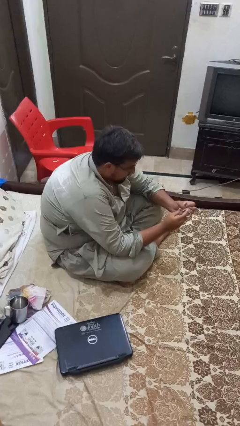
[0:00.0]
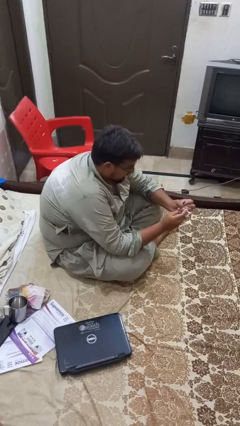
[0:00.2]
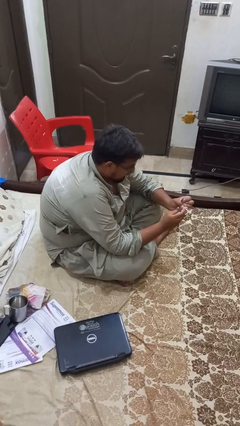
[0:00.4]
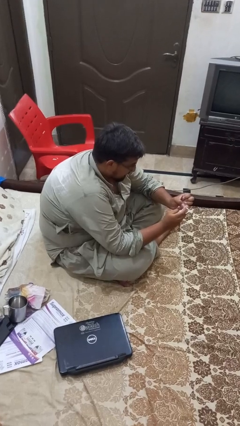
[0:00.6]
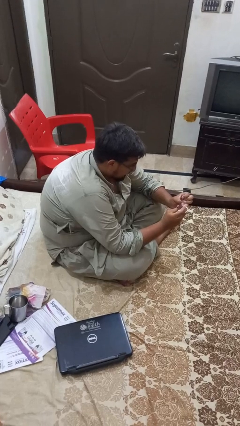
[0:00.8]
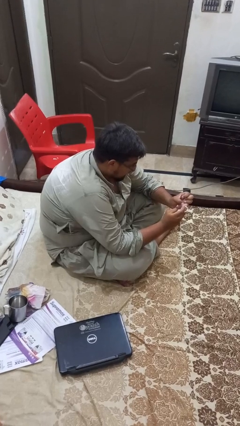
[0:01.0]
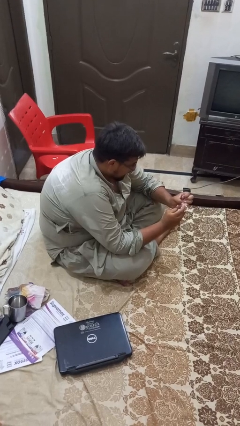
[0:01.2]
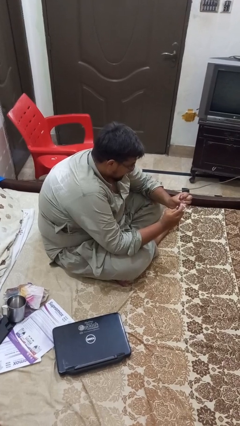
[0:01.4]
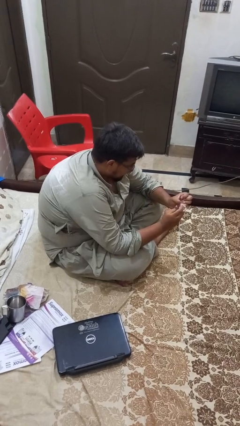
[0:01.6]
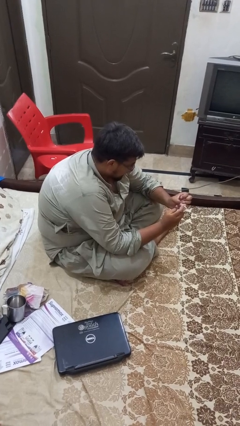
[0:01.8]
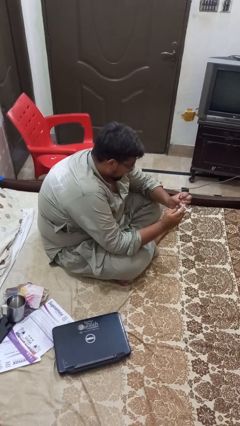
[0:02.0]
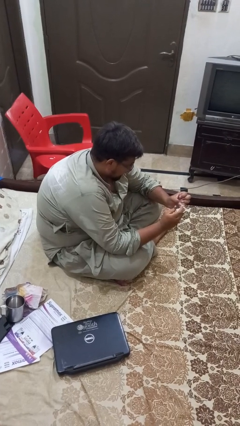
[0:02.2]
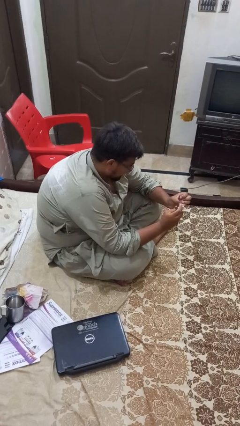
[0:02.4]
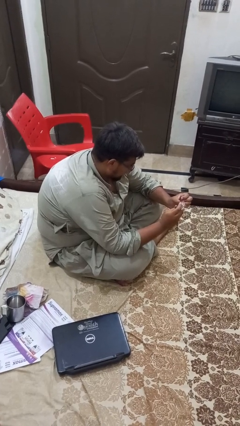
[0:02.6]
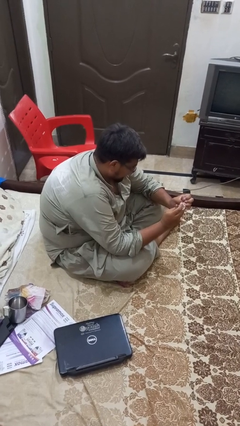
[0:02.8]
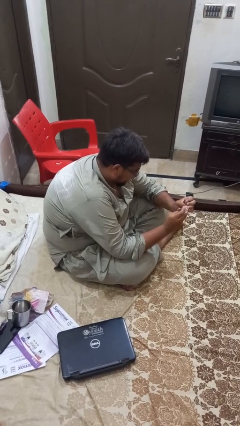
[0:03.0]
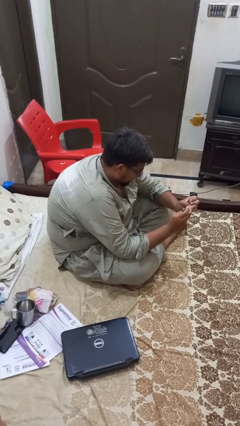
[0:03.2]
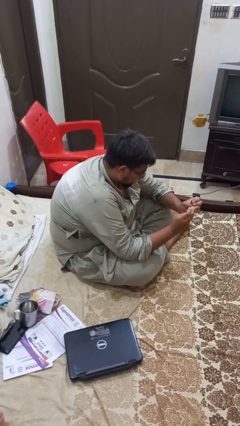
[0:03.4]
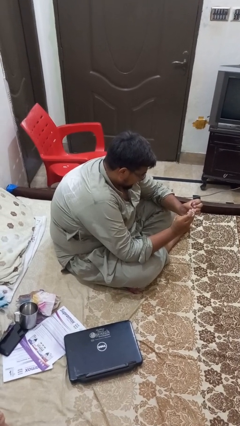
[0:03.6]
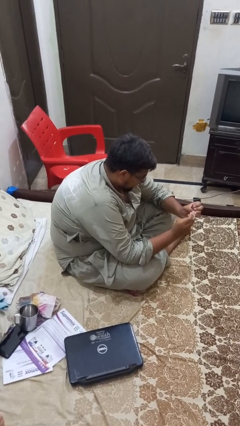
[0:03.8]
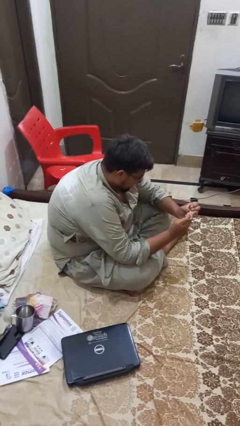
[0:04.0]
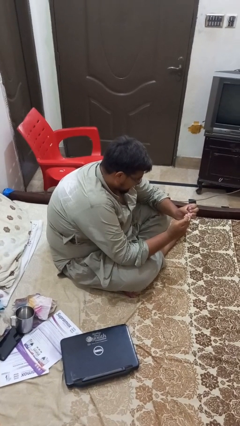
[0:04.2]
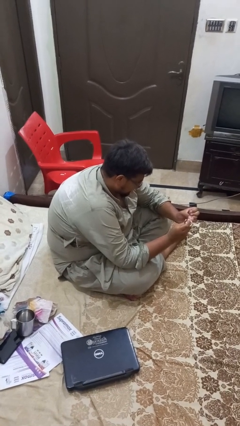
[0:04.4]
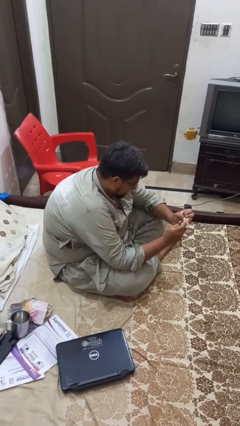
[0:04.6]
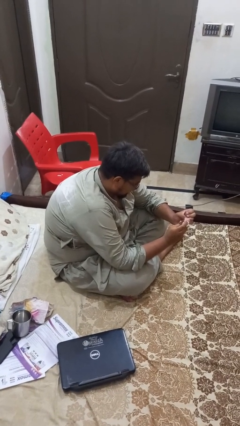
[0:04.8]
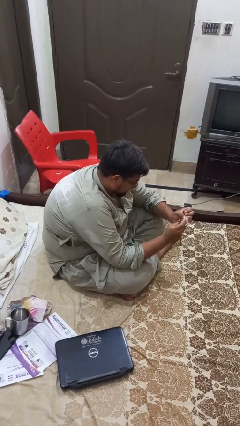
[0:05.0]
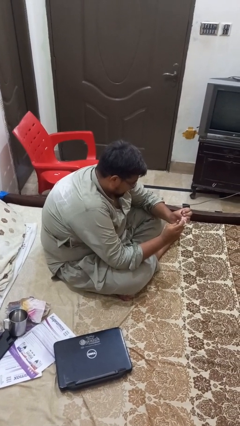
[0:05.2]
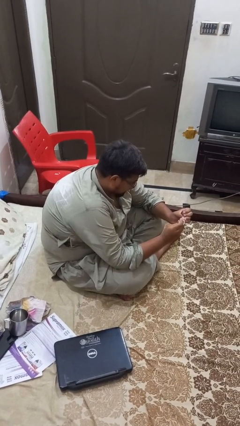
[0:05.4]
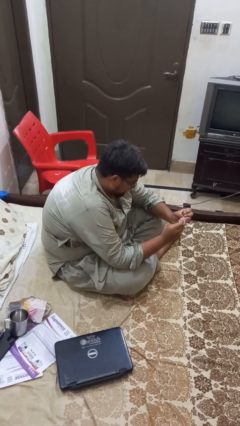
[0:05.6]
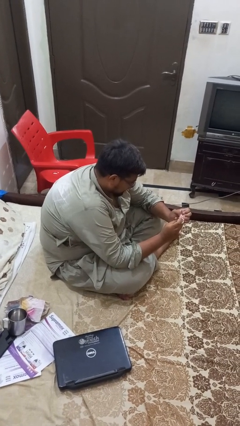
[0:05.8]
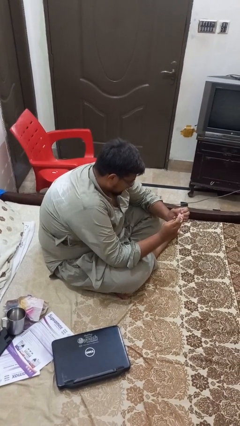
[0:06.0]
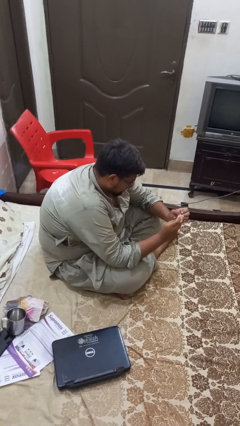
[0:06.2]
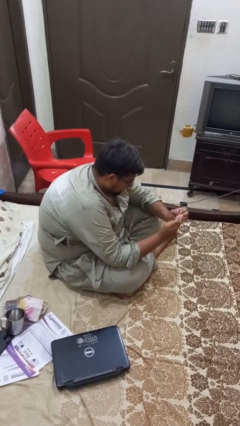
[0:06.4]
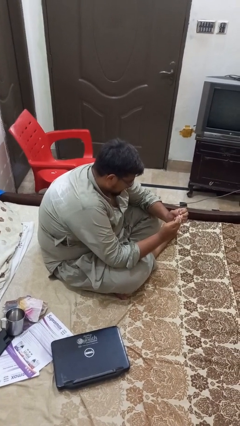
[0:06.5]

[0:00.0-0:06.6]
person clips fingernails

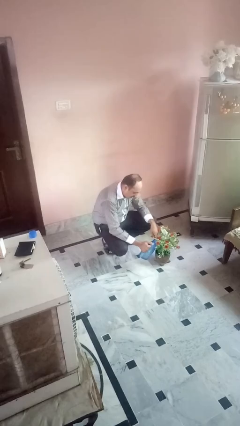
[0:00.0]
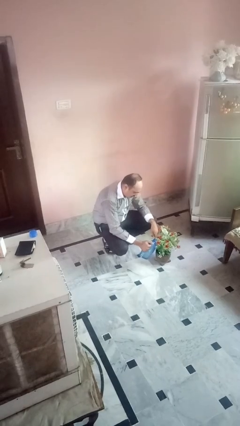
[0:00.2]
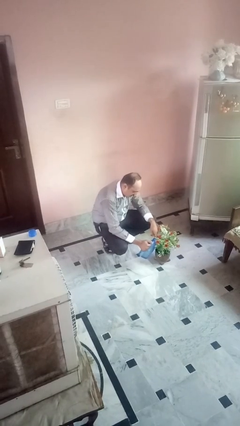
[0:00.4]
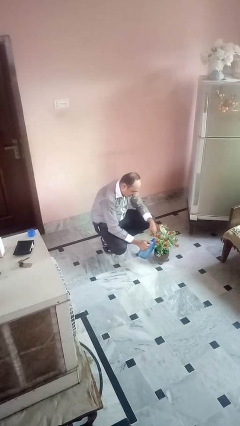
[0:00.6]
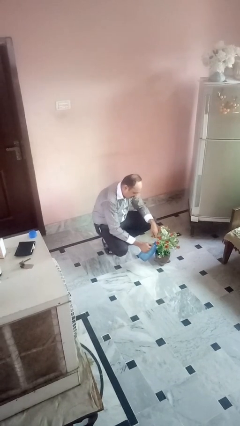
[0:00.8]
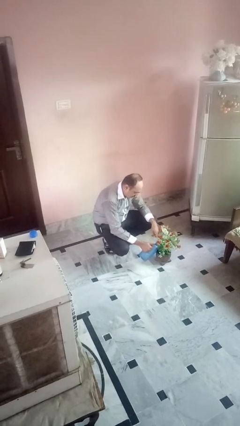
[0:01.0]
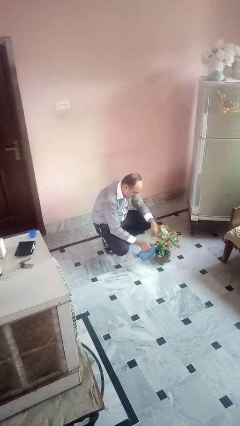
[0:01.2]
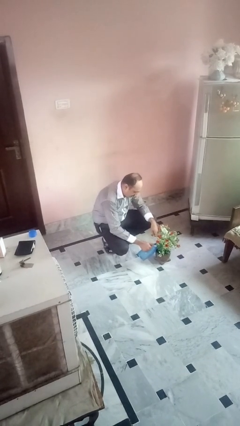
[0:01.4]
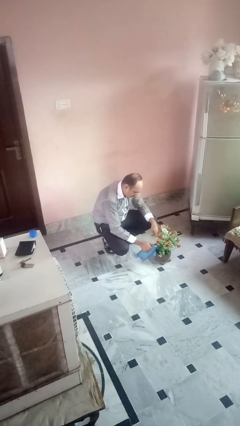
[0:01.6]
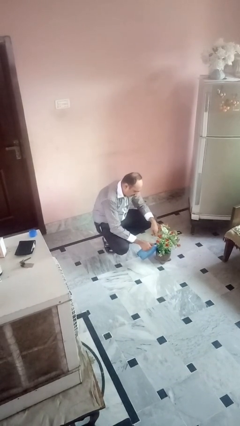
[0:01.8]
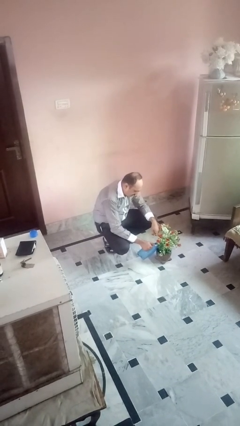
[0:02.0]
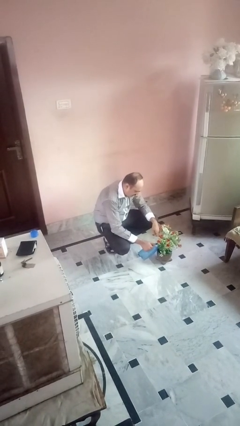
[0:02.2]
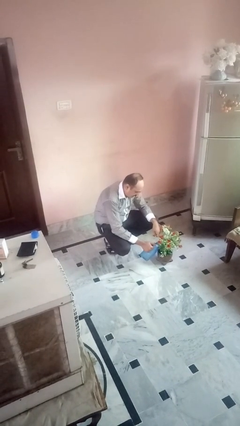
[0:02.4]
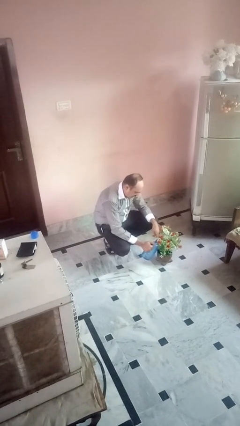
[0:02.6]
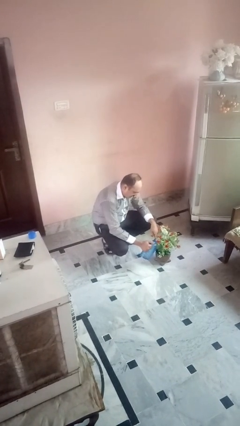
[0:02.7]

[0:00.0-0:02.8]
person waters houseplant

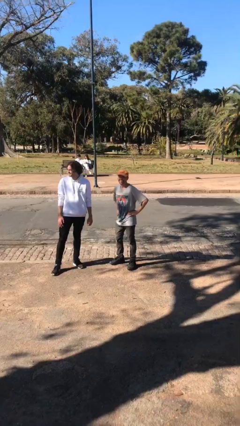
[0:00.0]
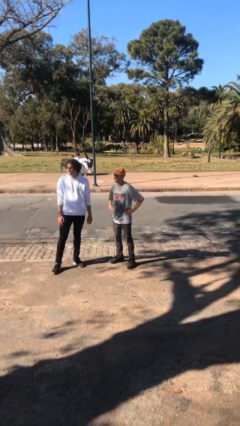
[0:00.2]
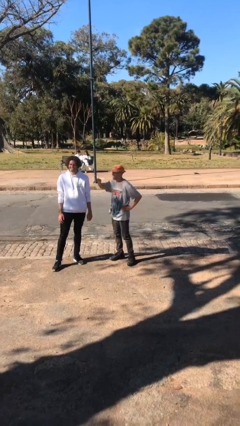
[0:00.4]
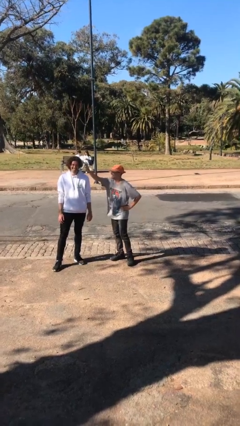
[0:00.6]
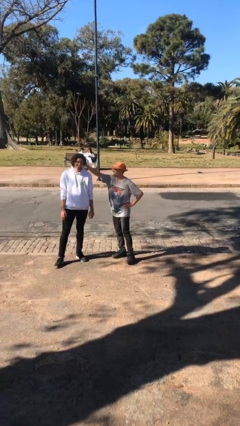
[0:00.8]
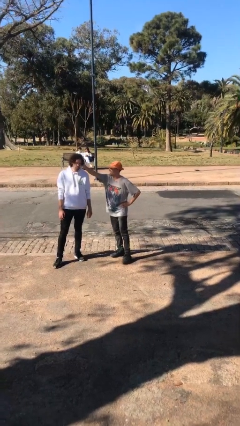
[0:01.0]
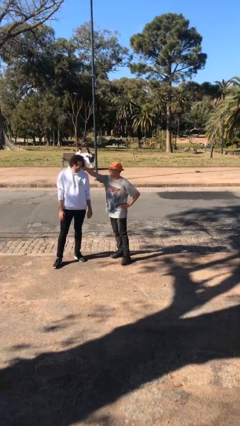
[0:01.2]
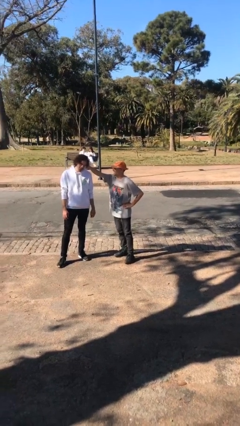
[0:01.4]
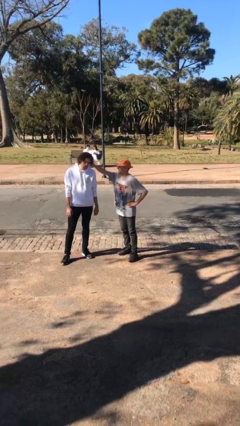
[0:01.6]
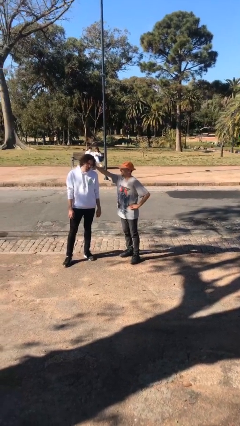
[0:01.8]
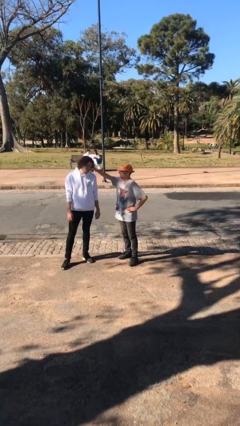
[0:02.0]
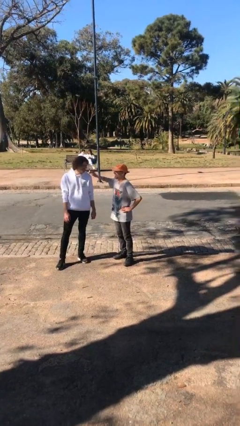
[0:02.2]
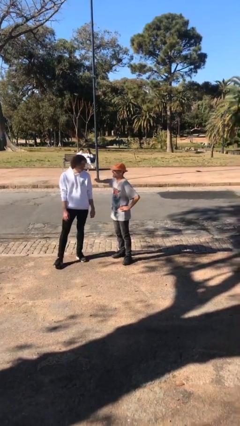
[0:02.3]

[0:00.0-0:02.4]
person grabs person by hair

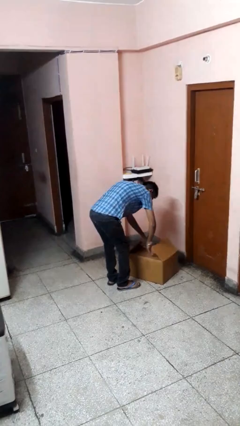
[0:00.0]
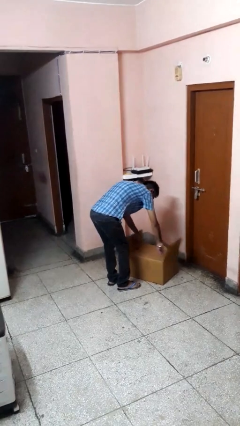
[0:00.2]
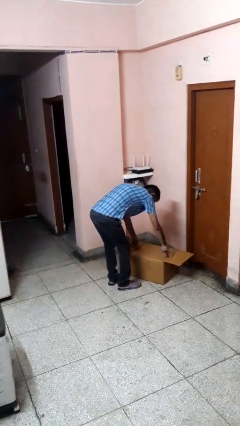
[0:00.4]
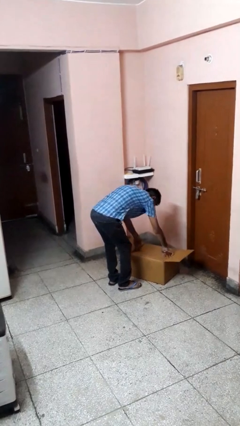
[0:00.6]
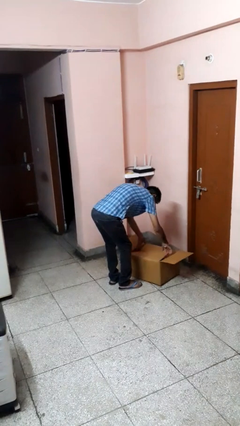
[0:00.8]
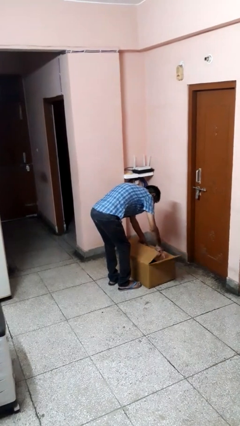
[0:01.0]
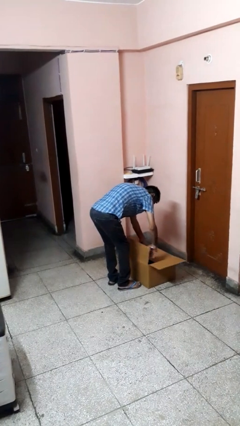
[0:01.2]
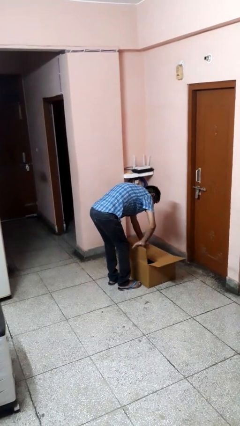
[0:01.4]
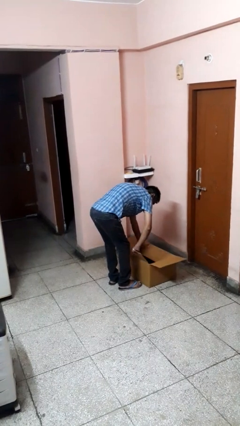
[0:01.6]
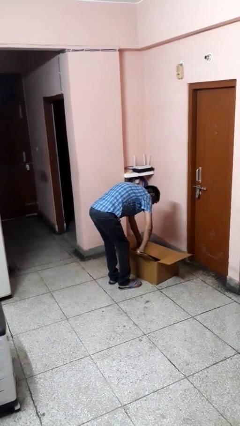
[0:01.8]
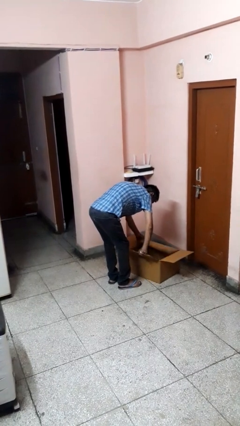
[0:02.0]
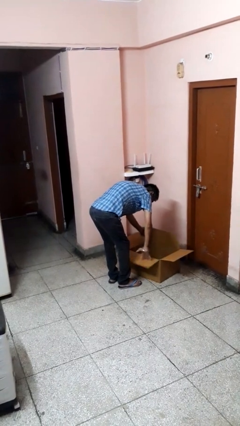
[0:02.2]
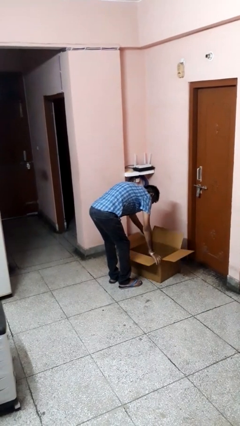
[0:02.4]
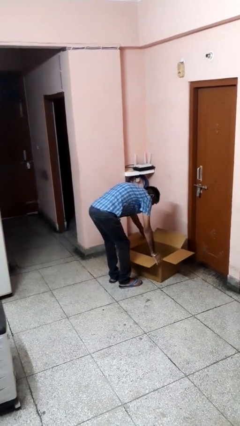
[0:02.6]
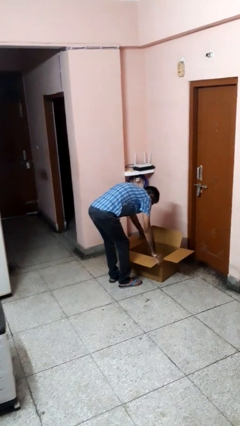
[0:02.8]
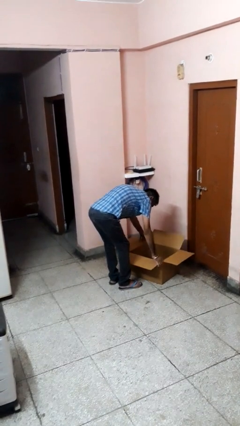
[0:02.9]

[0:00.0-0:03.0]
person opens box

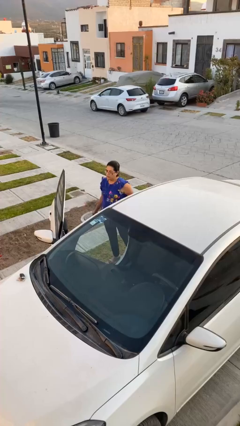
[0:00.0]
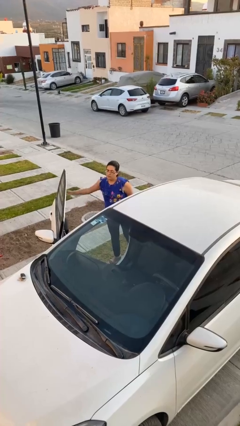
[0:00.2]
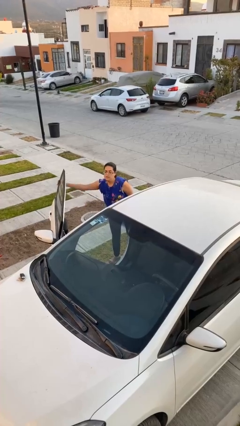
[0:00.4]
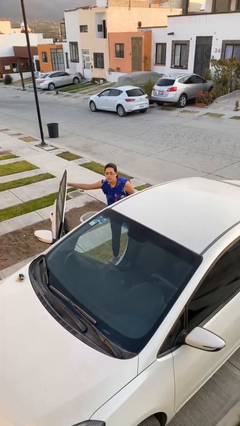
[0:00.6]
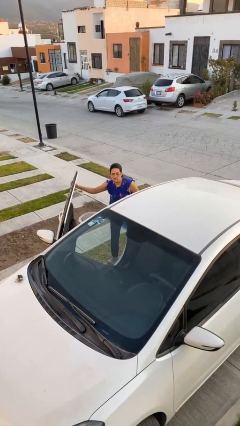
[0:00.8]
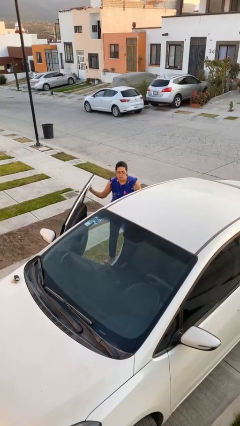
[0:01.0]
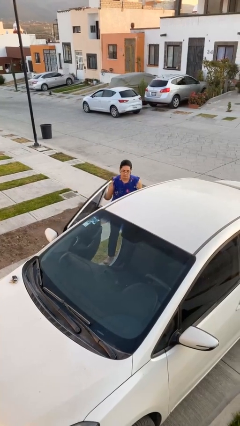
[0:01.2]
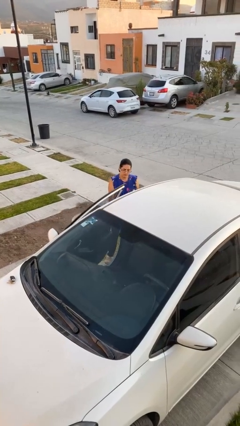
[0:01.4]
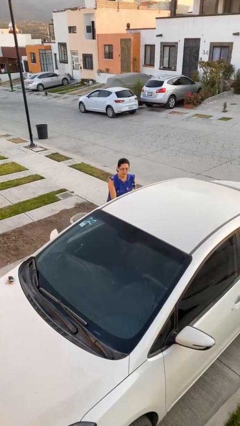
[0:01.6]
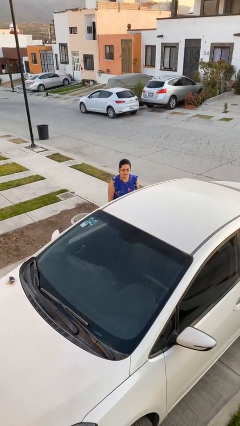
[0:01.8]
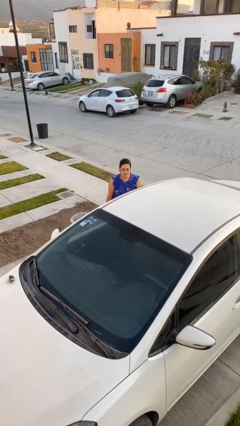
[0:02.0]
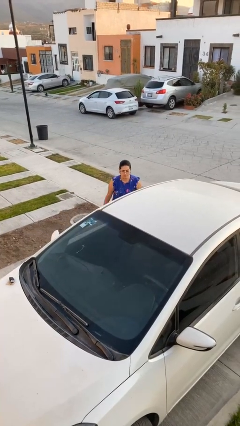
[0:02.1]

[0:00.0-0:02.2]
person closes car door

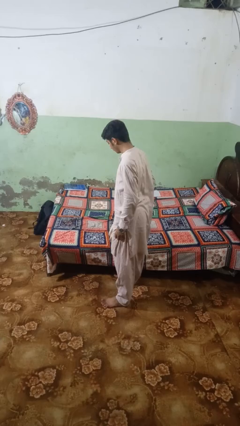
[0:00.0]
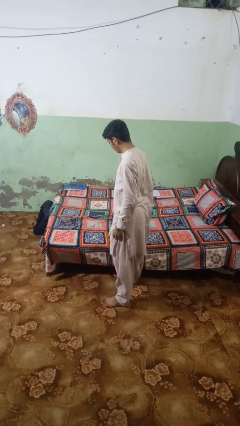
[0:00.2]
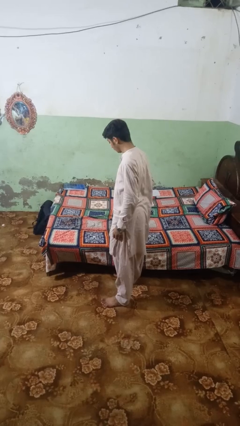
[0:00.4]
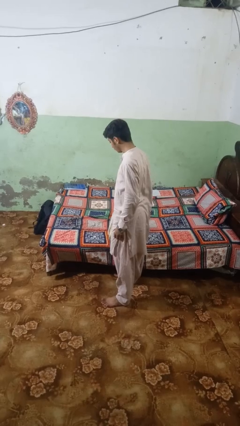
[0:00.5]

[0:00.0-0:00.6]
person puts down object on bed
